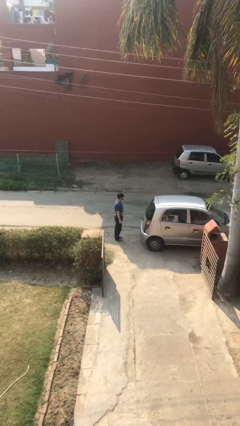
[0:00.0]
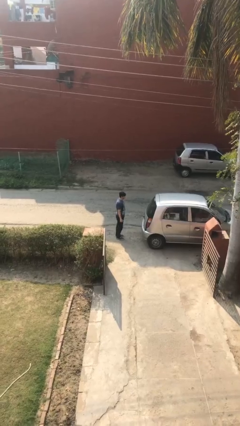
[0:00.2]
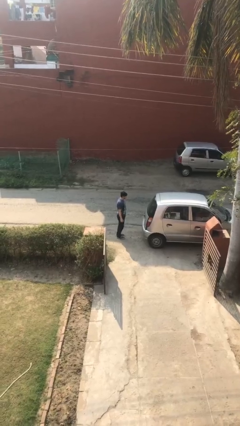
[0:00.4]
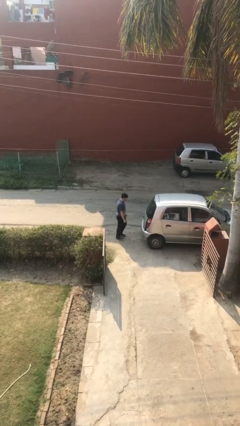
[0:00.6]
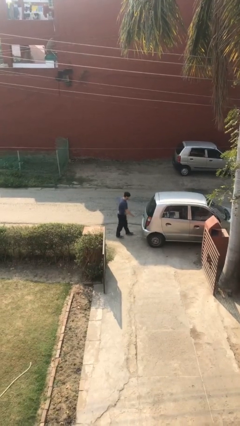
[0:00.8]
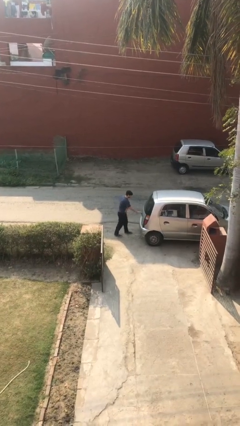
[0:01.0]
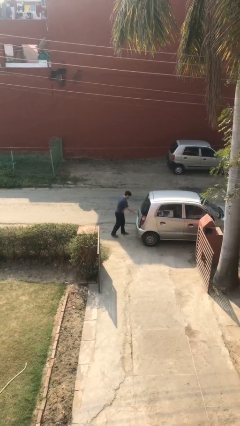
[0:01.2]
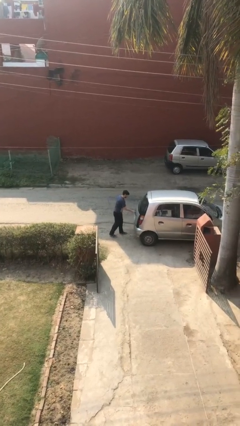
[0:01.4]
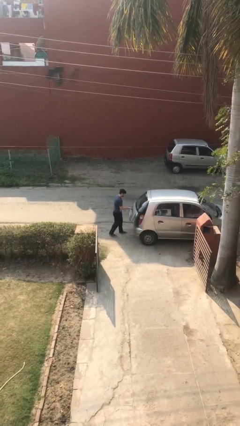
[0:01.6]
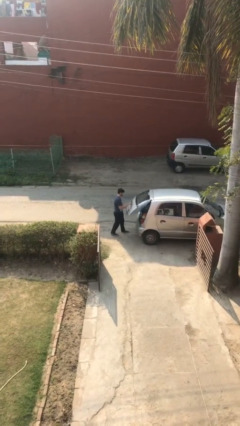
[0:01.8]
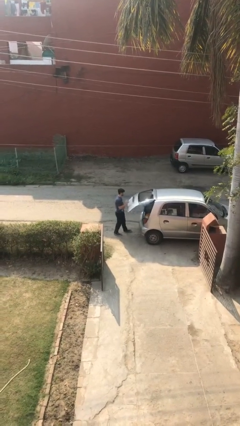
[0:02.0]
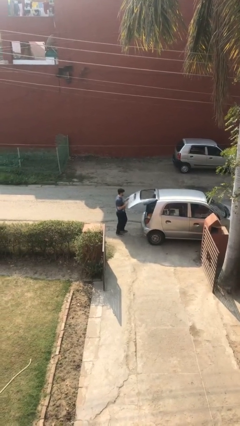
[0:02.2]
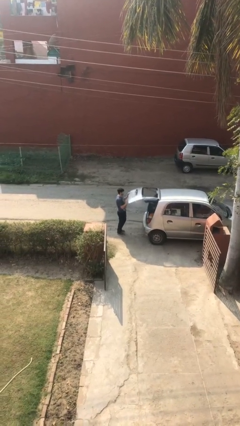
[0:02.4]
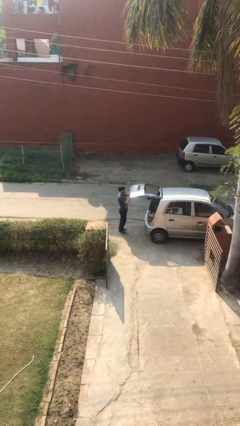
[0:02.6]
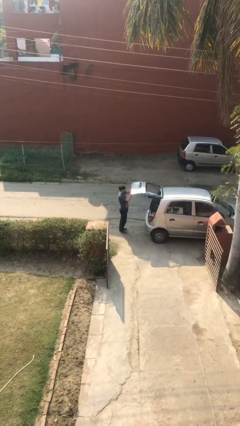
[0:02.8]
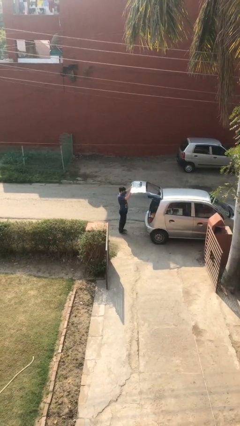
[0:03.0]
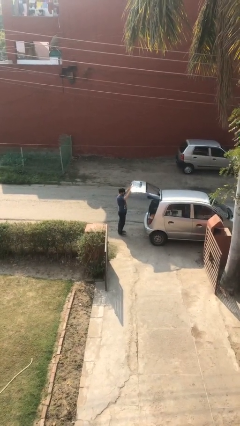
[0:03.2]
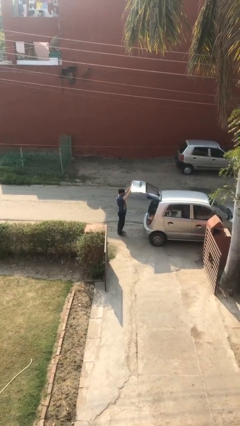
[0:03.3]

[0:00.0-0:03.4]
person opens car trunk

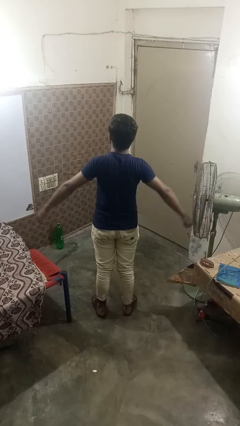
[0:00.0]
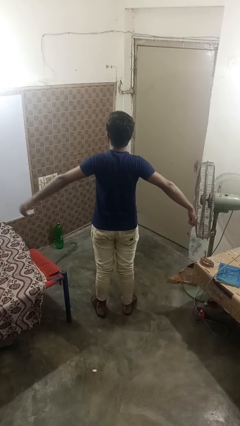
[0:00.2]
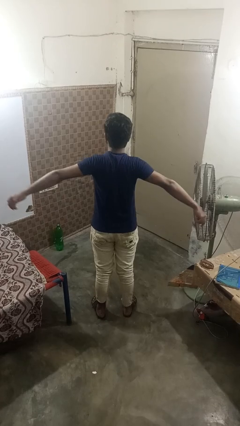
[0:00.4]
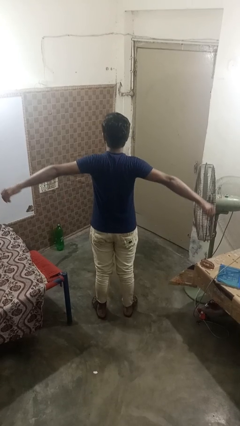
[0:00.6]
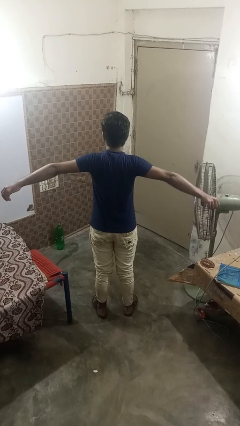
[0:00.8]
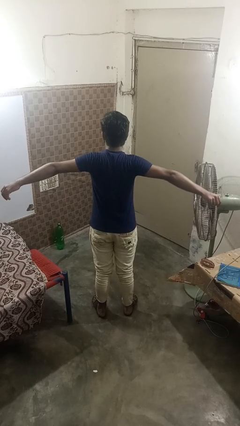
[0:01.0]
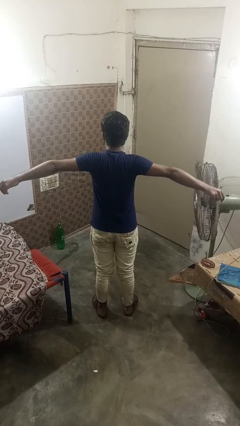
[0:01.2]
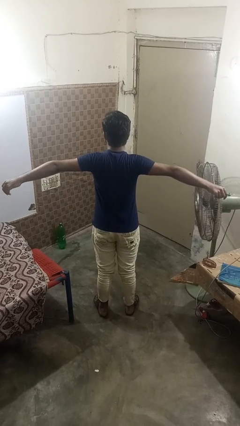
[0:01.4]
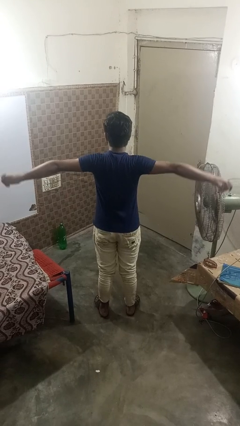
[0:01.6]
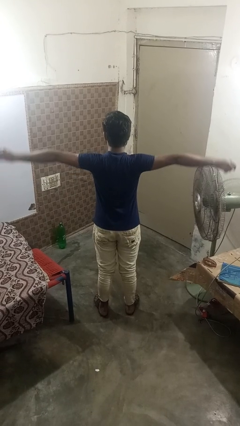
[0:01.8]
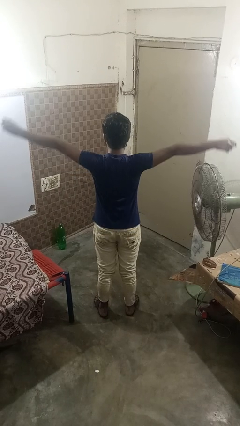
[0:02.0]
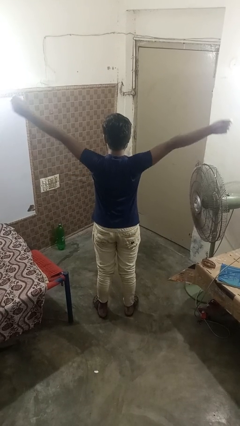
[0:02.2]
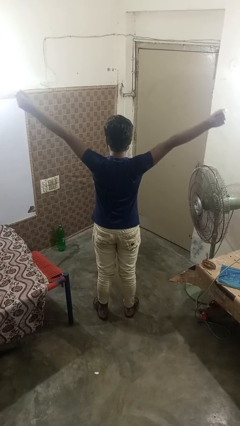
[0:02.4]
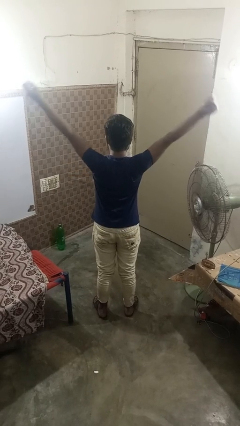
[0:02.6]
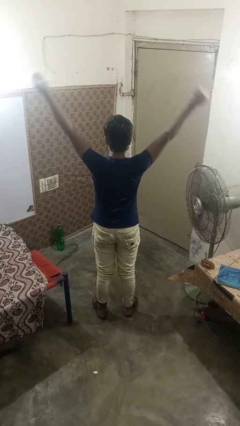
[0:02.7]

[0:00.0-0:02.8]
person stretches arms to side

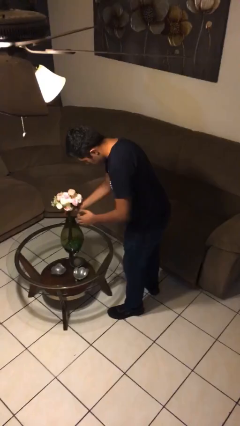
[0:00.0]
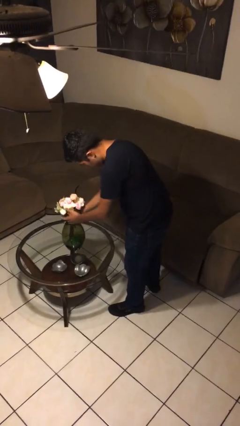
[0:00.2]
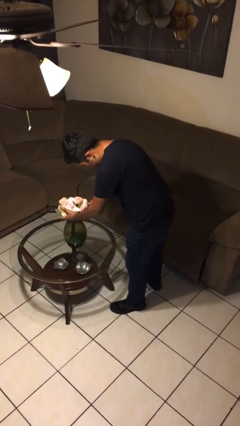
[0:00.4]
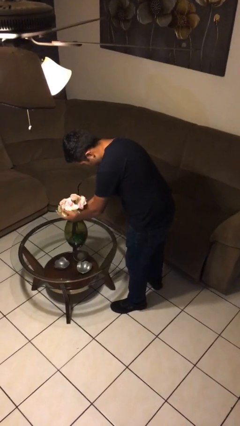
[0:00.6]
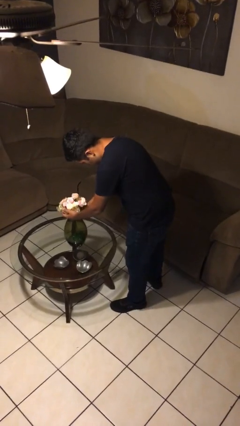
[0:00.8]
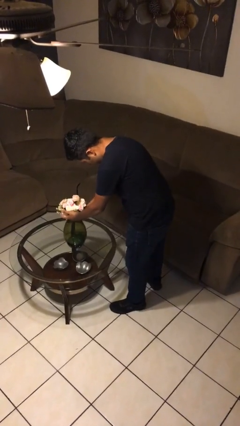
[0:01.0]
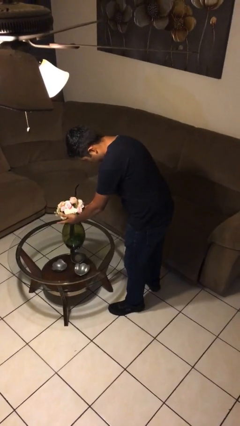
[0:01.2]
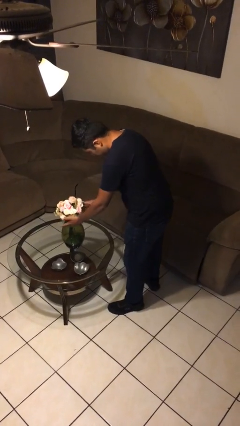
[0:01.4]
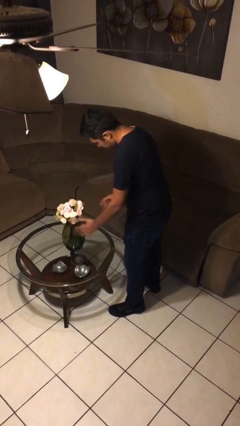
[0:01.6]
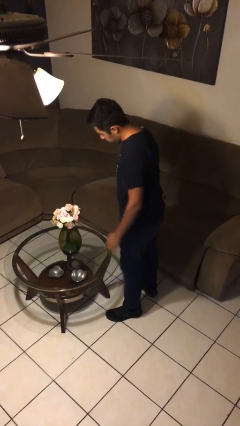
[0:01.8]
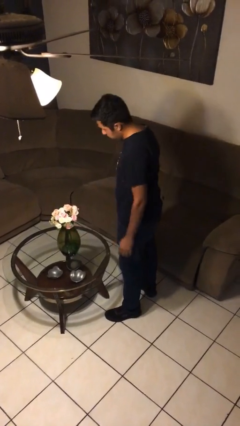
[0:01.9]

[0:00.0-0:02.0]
person arranges flowers in vase

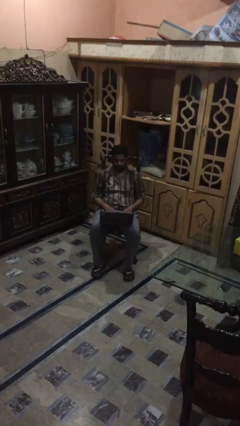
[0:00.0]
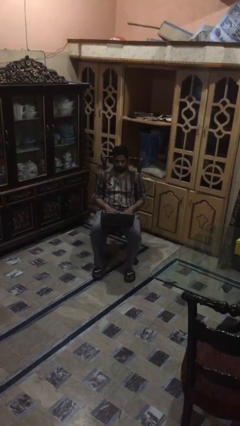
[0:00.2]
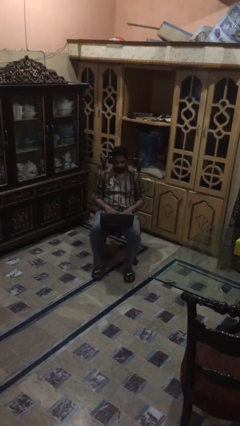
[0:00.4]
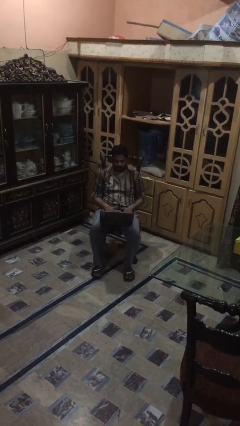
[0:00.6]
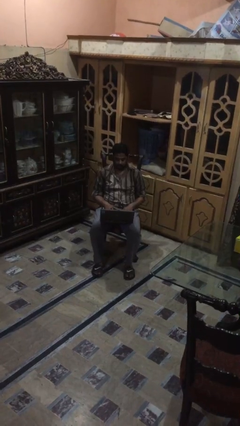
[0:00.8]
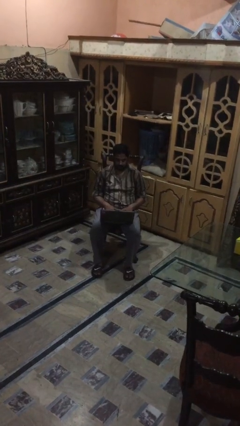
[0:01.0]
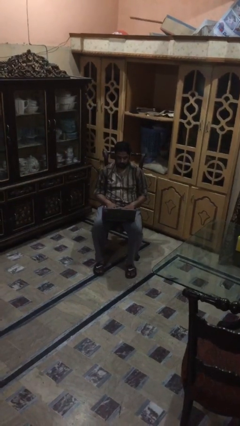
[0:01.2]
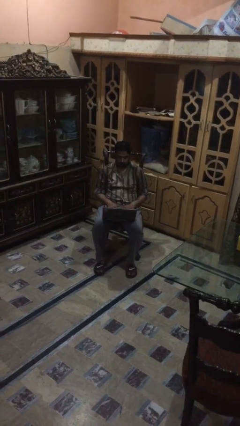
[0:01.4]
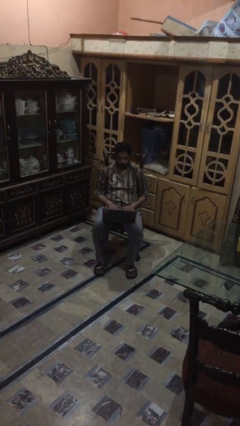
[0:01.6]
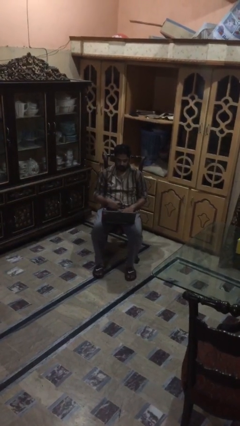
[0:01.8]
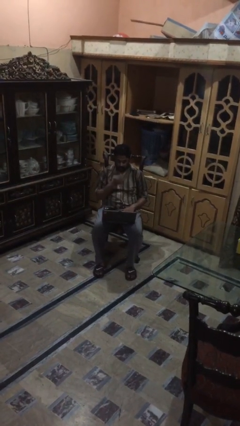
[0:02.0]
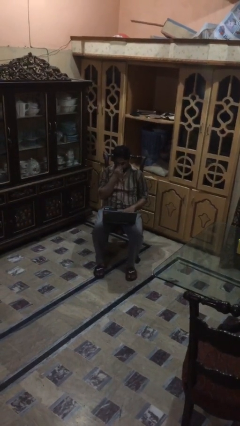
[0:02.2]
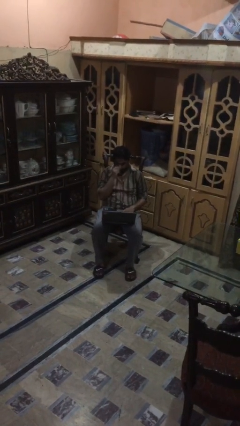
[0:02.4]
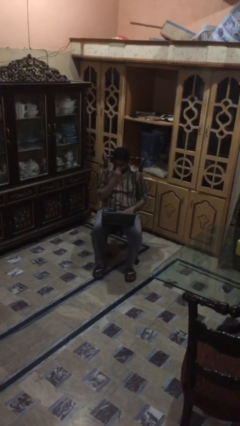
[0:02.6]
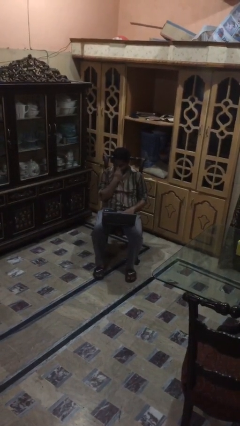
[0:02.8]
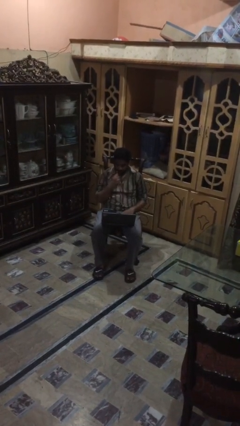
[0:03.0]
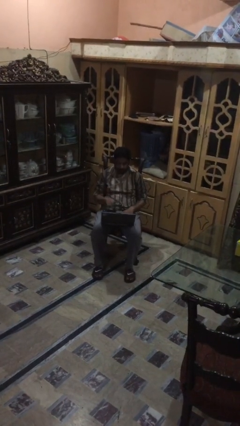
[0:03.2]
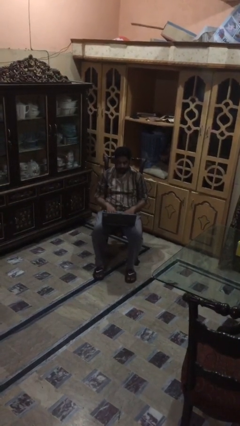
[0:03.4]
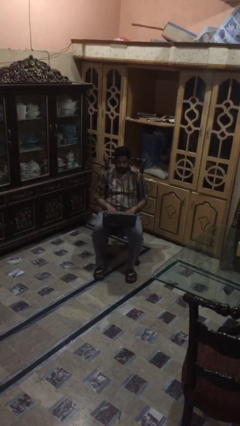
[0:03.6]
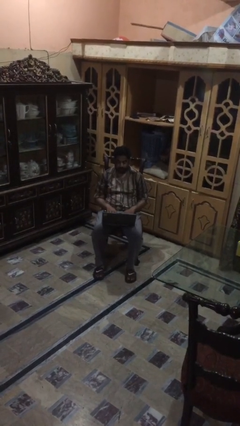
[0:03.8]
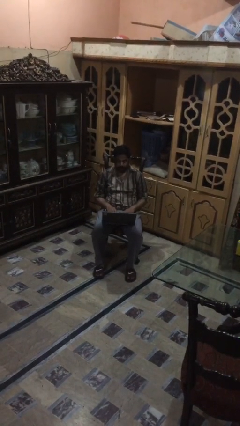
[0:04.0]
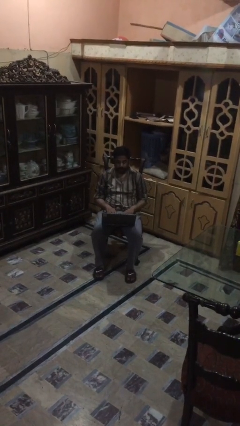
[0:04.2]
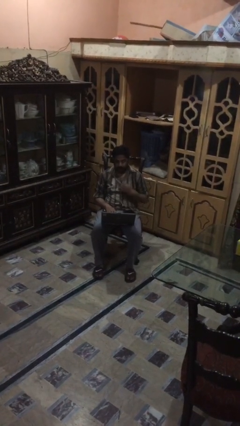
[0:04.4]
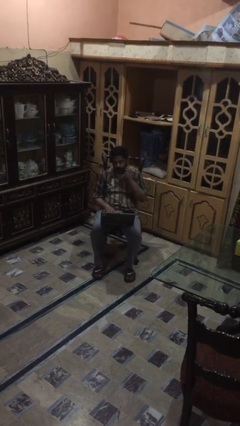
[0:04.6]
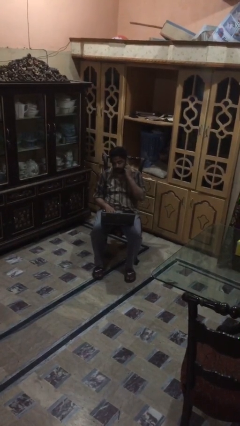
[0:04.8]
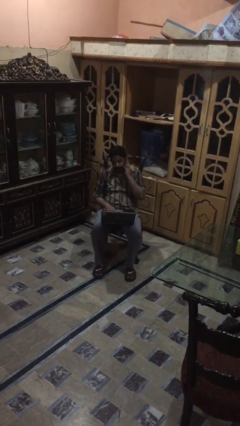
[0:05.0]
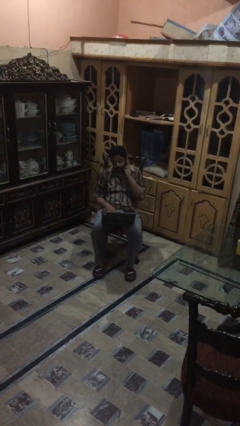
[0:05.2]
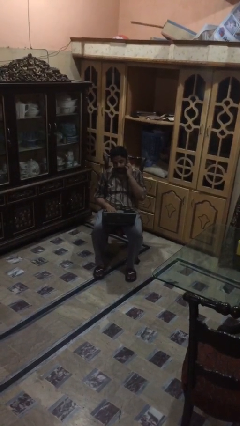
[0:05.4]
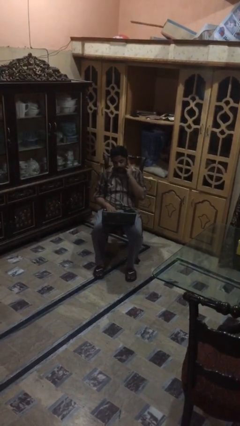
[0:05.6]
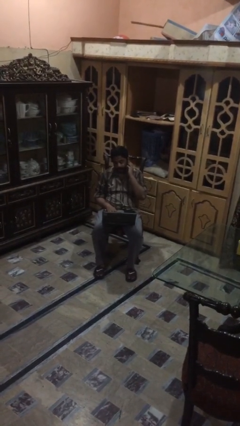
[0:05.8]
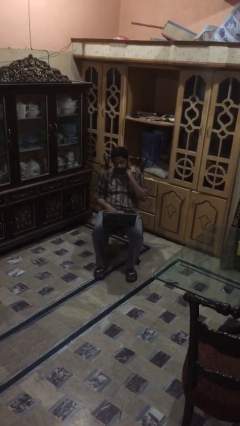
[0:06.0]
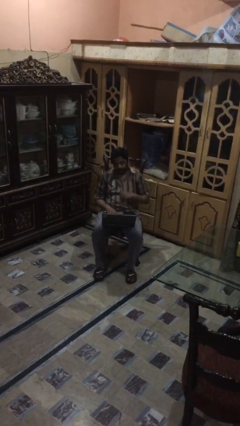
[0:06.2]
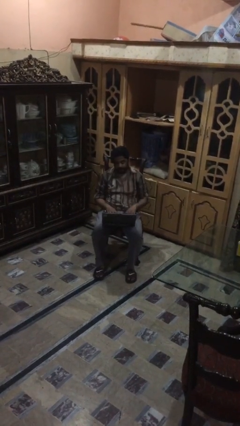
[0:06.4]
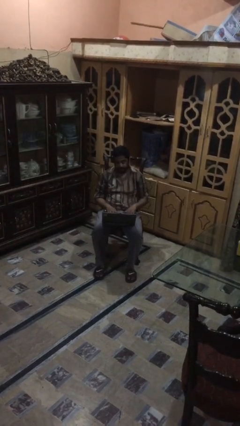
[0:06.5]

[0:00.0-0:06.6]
person interacts with laptop

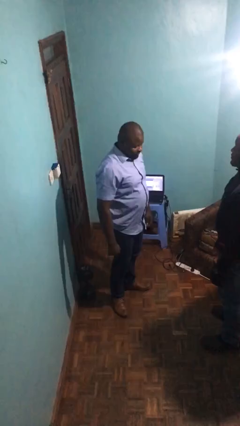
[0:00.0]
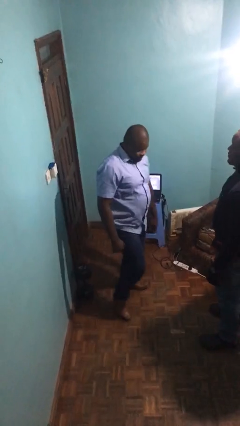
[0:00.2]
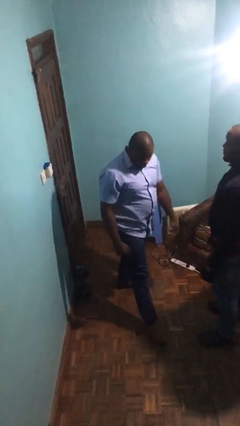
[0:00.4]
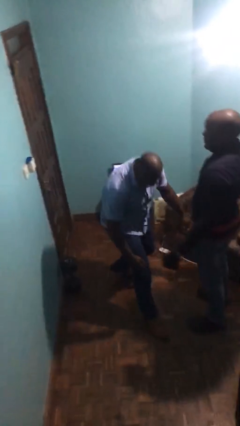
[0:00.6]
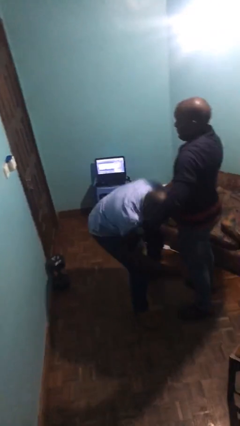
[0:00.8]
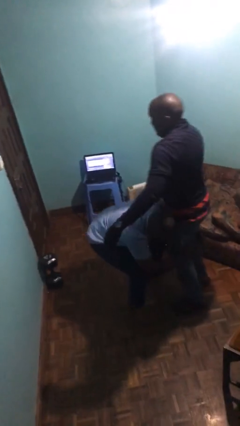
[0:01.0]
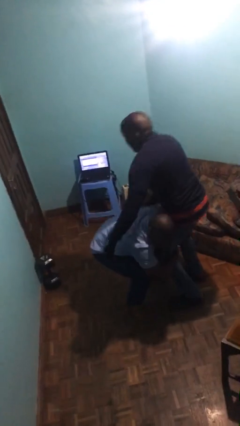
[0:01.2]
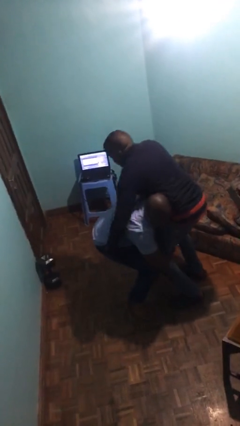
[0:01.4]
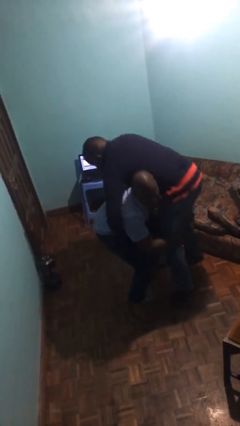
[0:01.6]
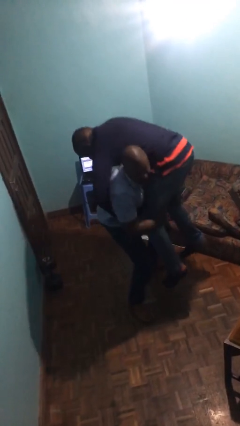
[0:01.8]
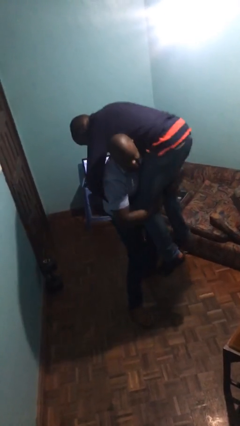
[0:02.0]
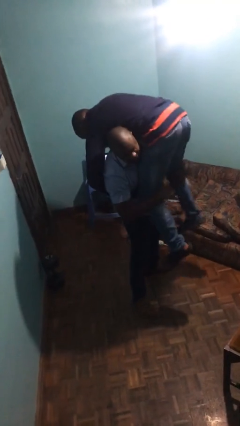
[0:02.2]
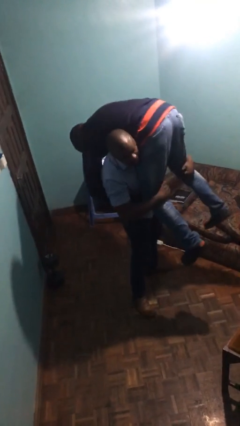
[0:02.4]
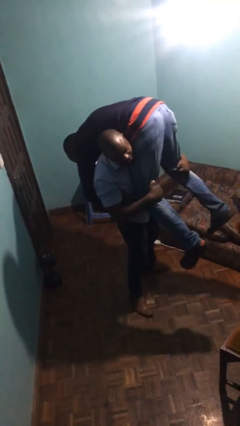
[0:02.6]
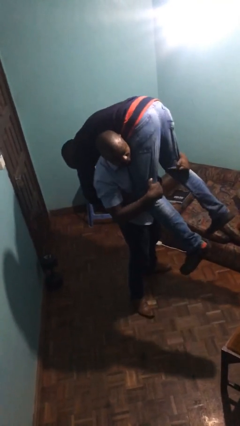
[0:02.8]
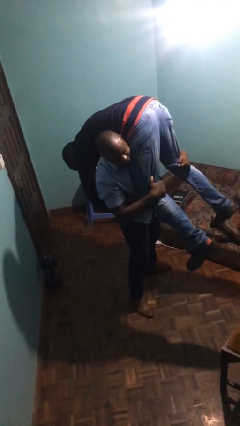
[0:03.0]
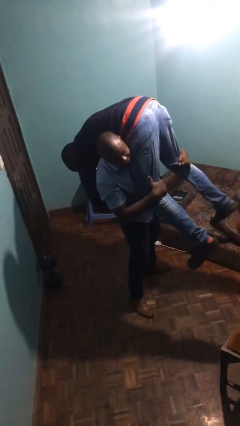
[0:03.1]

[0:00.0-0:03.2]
person carries person over shoulder
